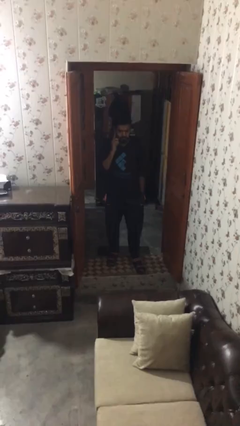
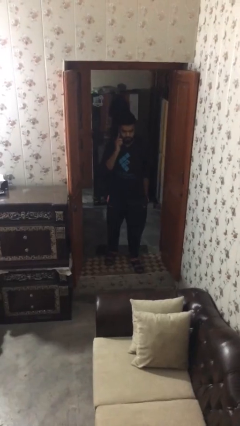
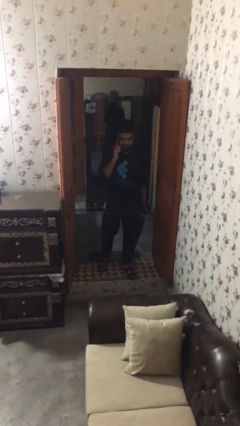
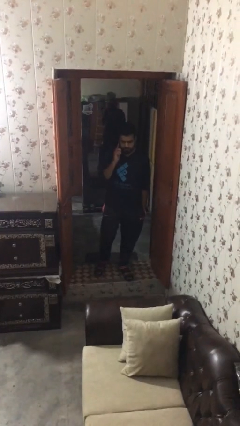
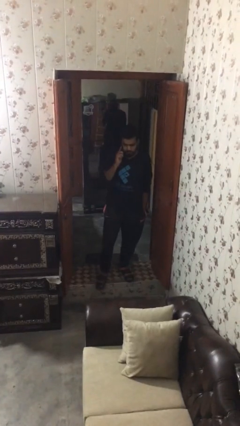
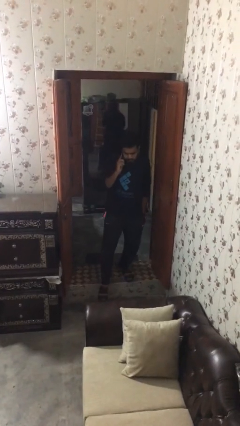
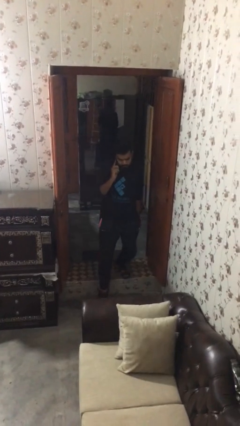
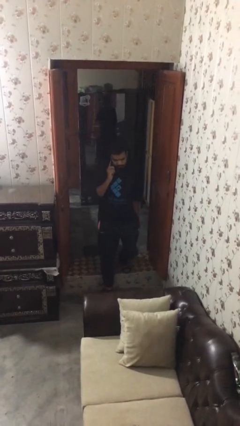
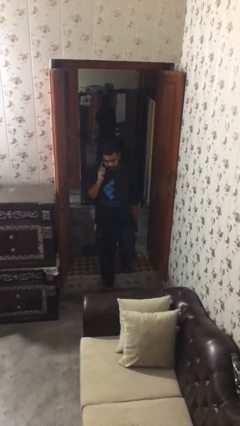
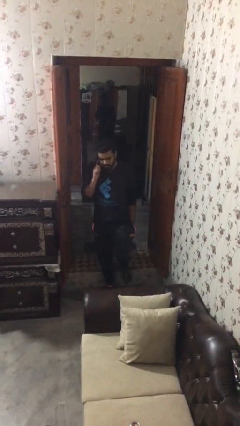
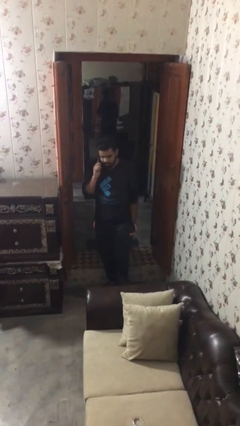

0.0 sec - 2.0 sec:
person enters scene through structure

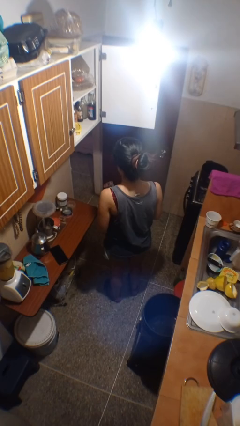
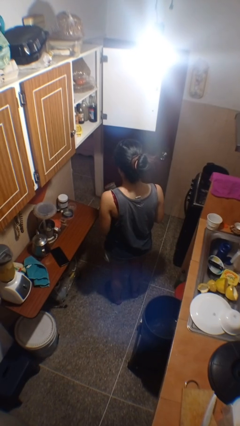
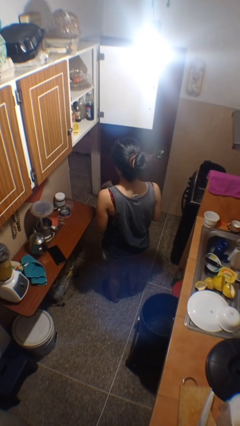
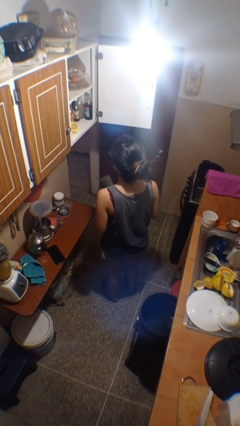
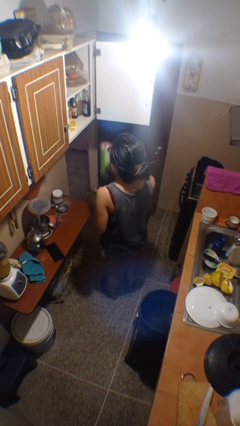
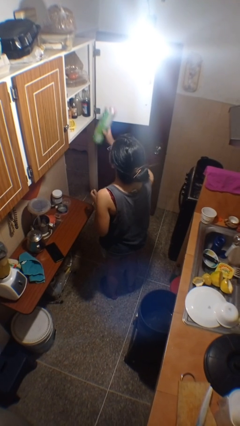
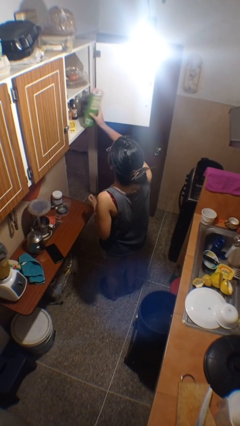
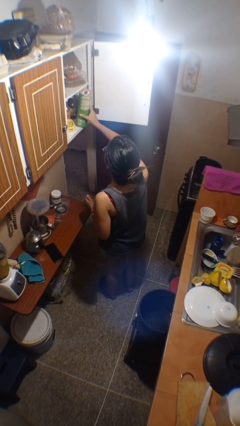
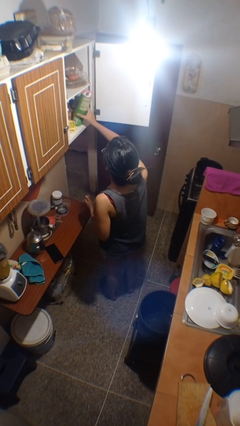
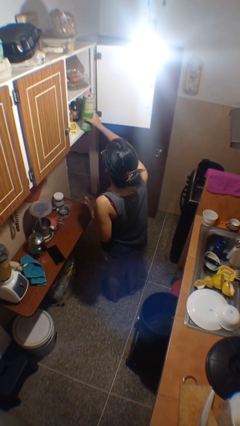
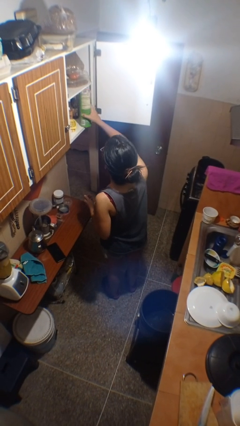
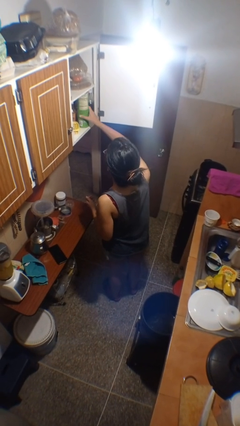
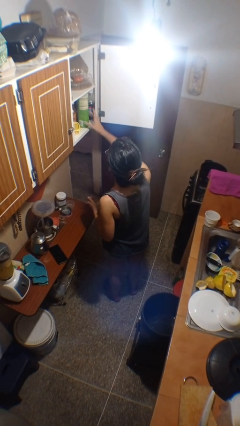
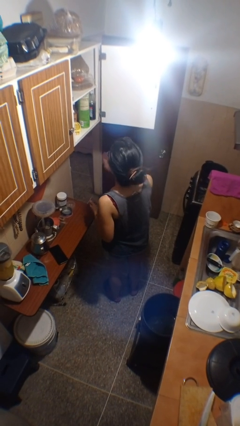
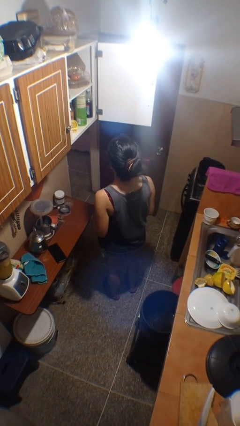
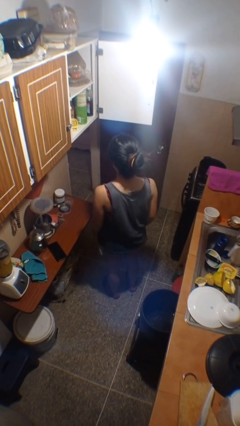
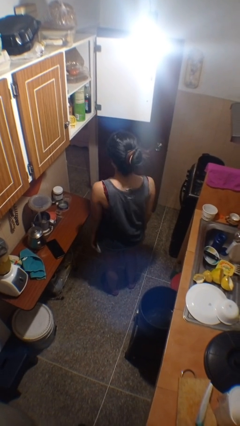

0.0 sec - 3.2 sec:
person puts object in cabinet

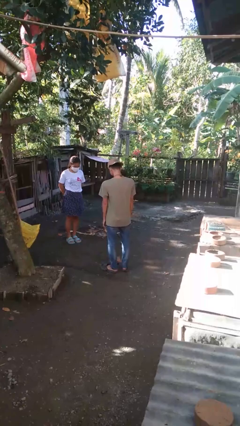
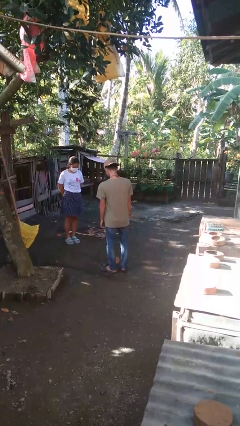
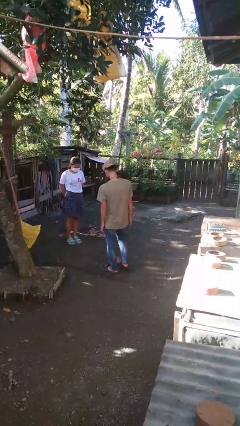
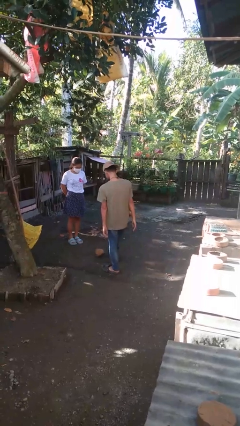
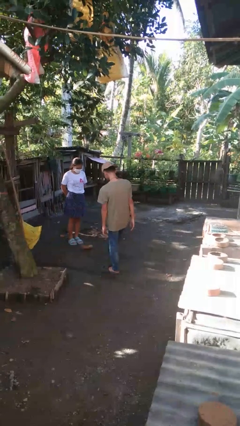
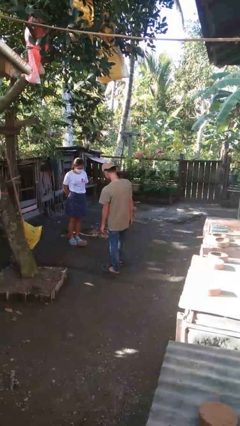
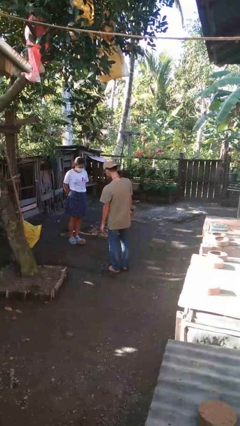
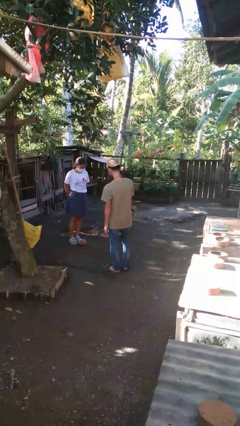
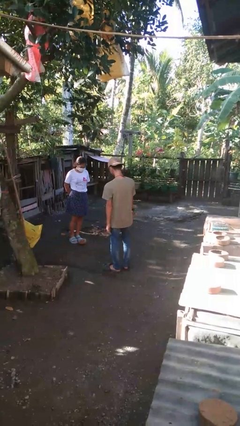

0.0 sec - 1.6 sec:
person kicks object to person

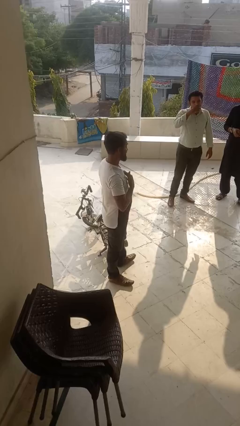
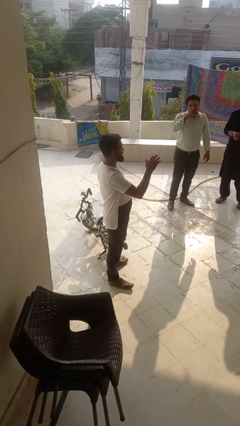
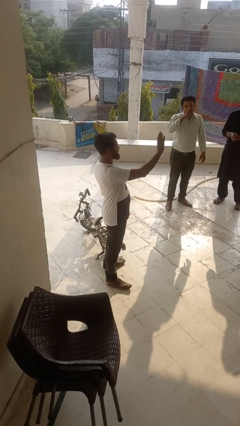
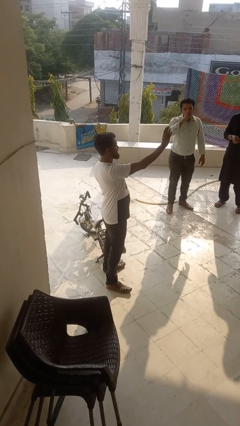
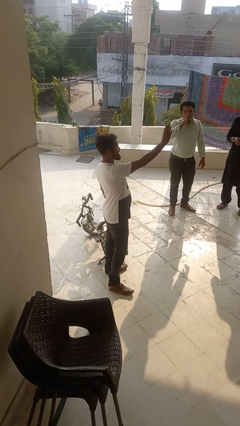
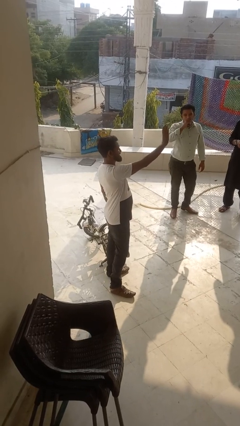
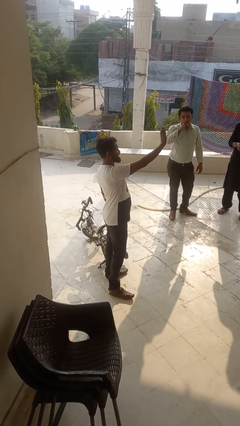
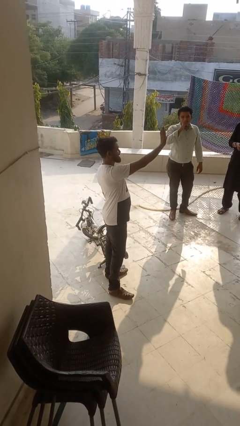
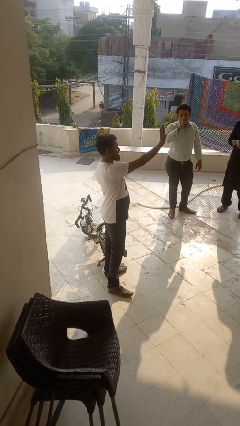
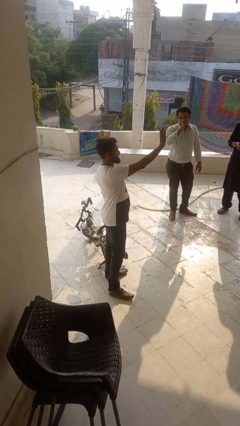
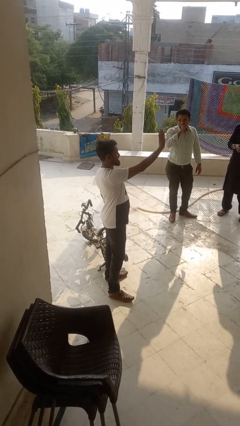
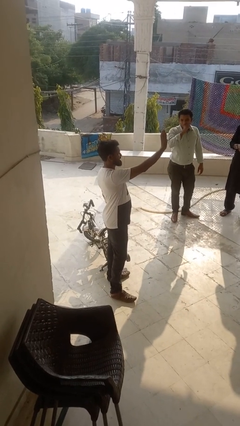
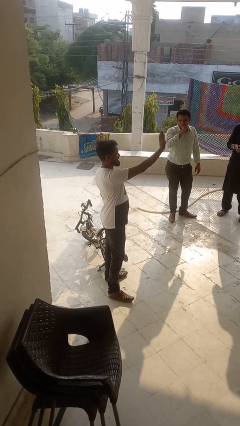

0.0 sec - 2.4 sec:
person waves at person

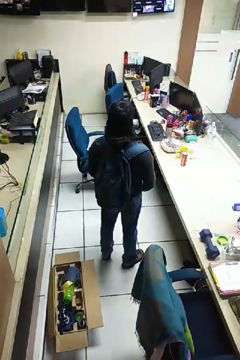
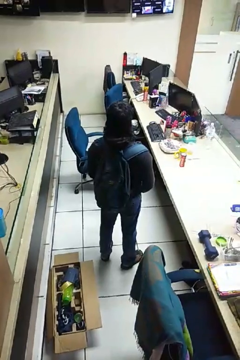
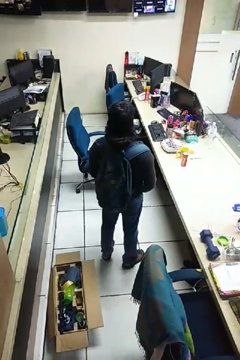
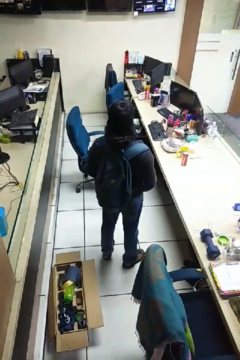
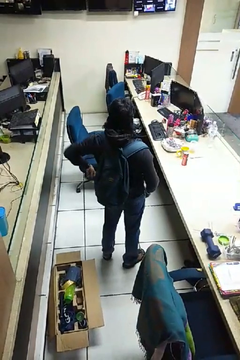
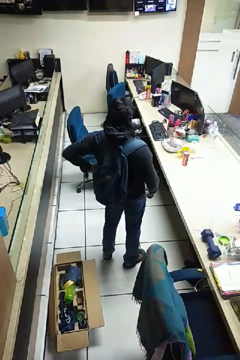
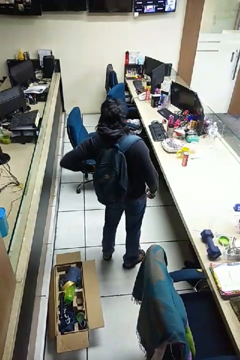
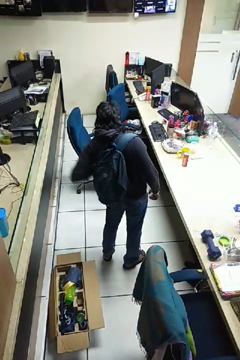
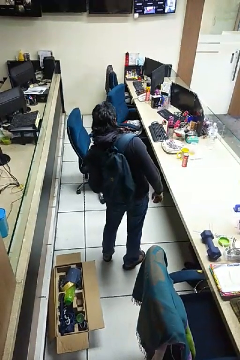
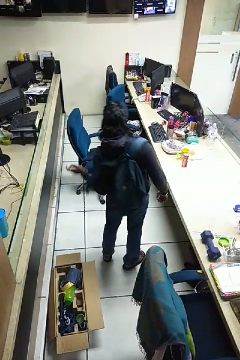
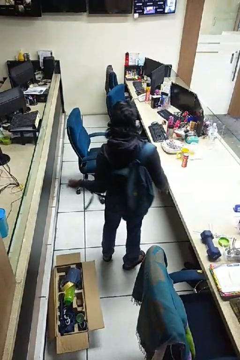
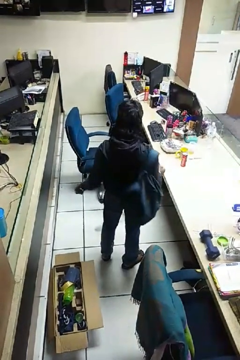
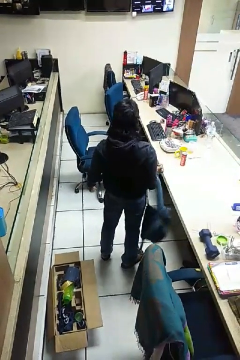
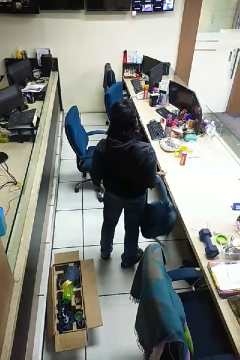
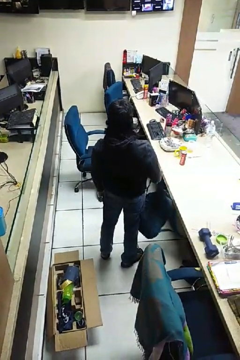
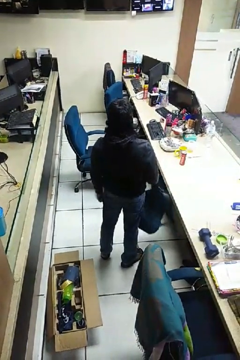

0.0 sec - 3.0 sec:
person takes off backpack

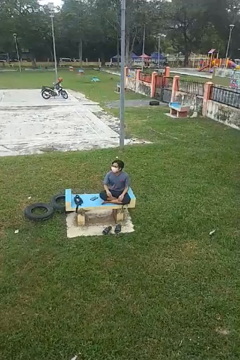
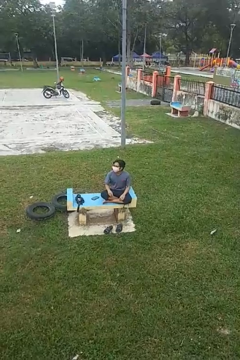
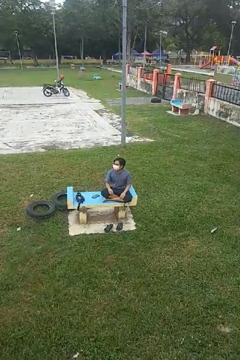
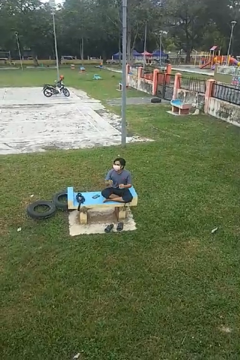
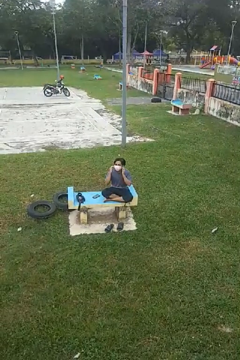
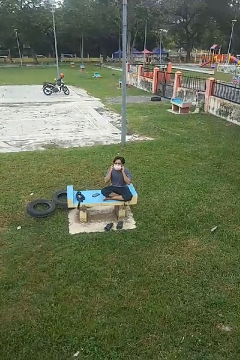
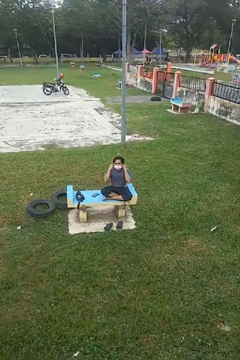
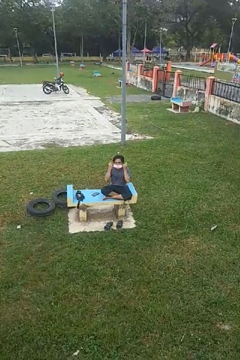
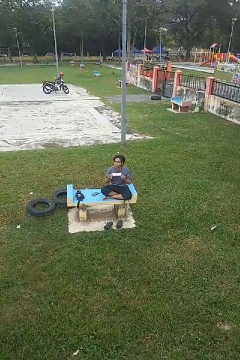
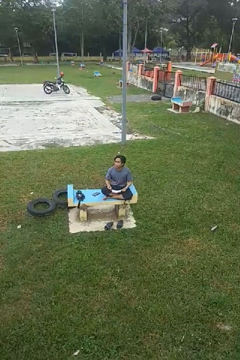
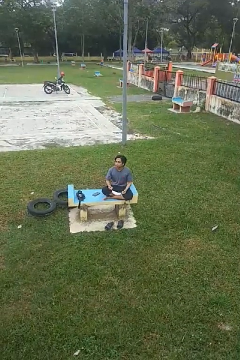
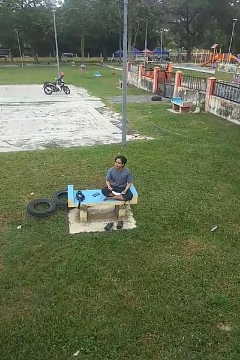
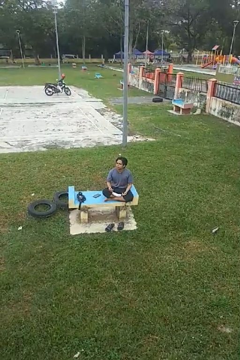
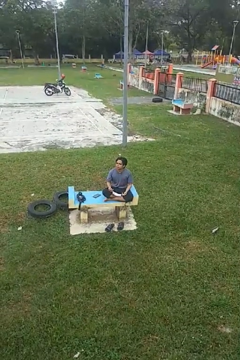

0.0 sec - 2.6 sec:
person takes off facemask

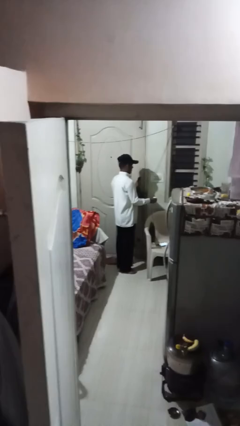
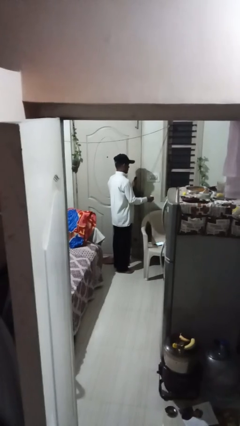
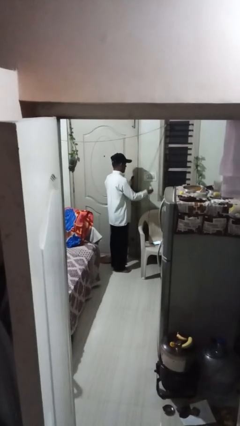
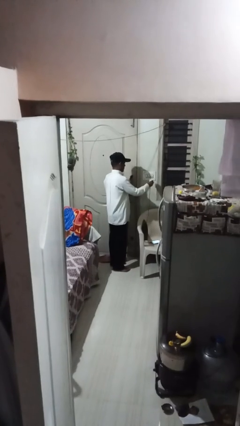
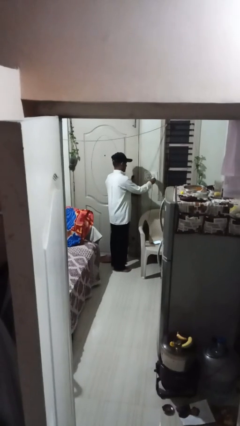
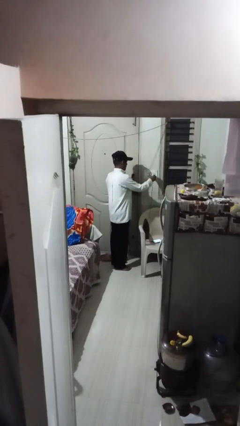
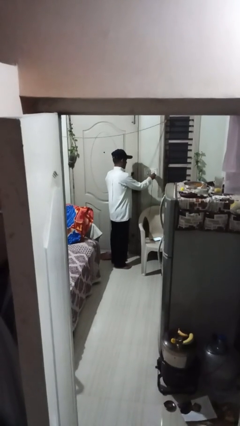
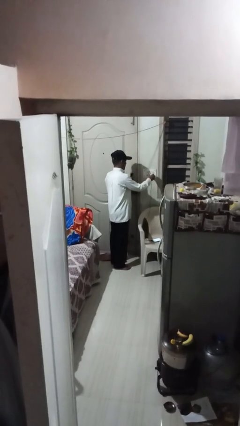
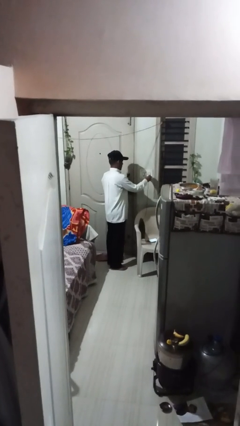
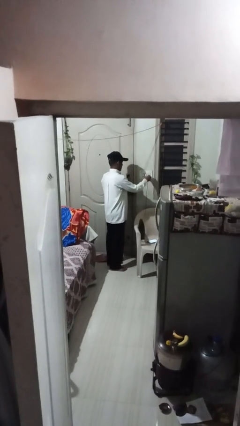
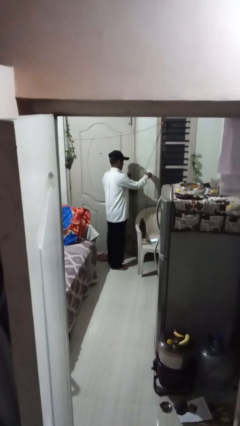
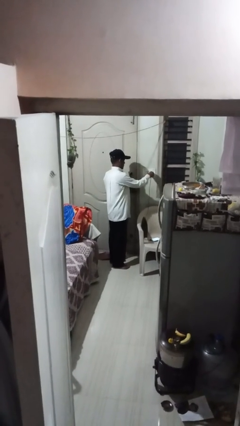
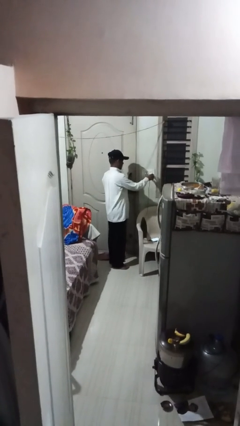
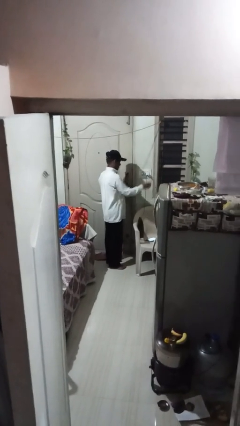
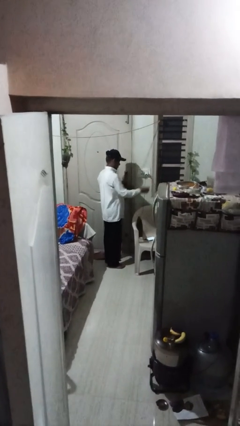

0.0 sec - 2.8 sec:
person plugs into electrical socket

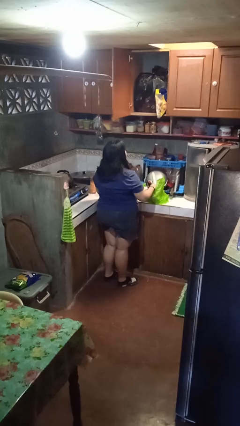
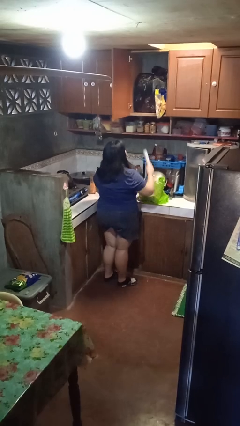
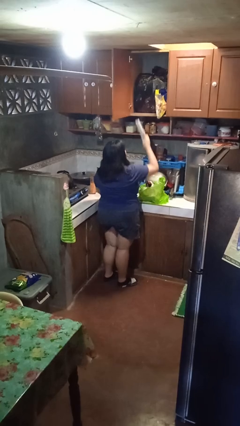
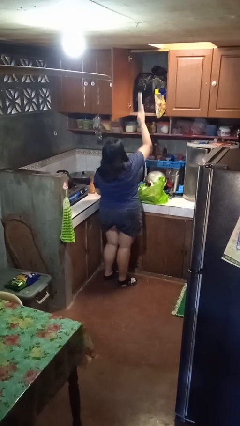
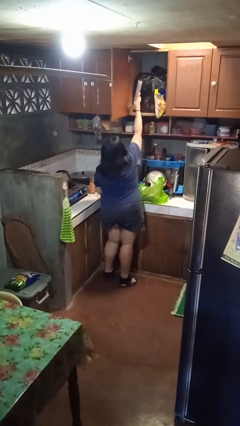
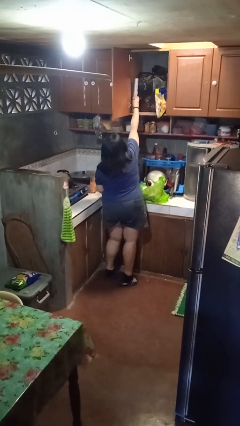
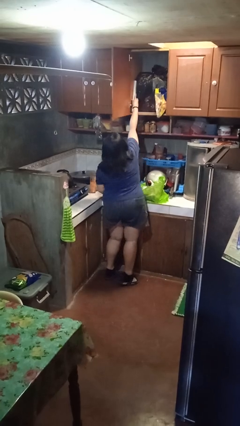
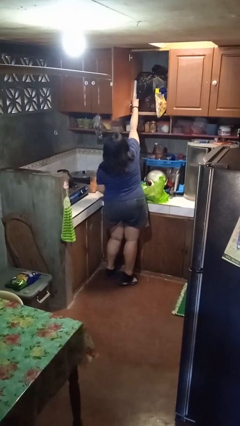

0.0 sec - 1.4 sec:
person loads groceries into cabinet
